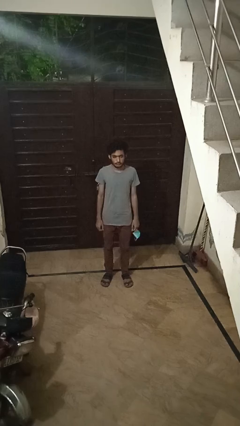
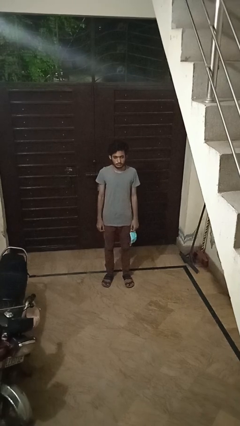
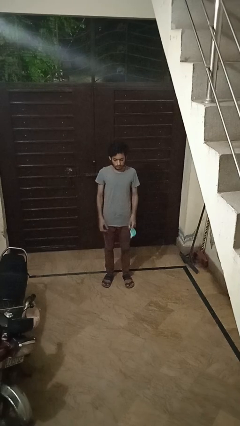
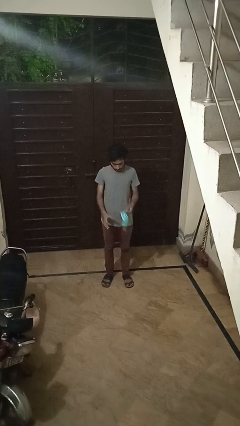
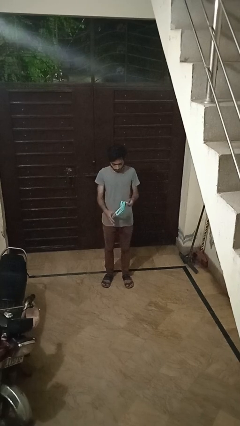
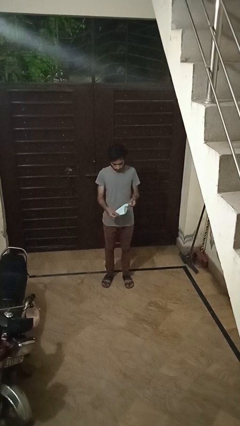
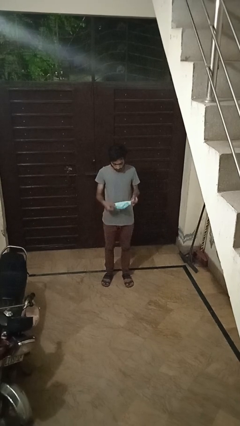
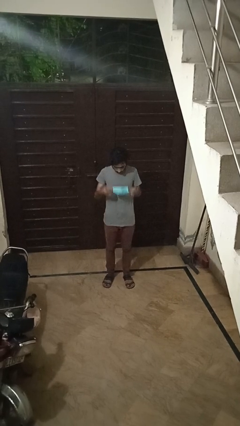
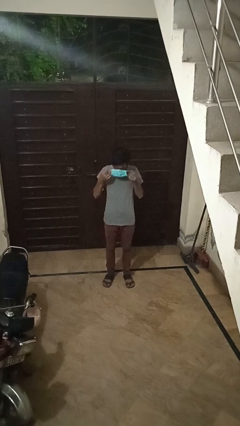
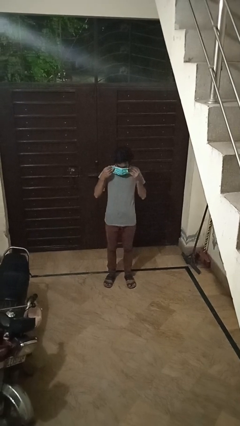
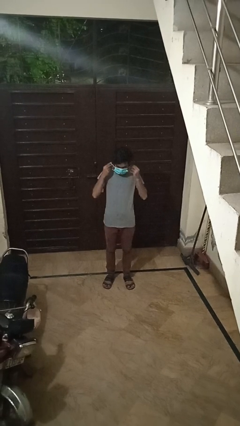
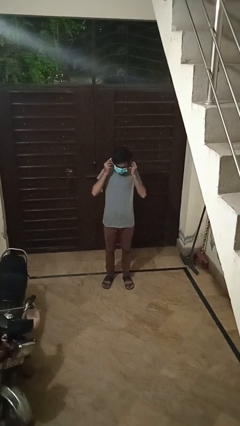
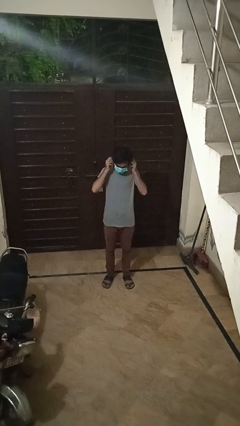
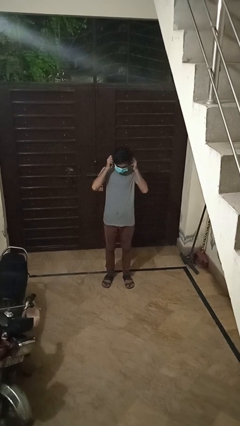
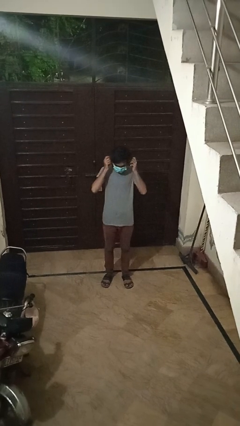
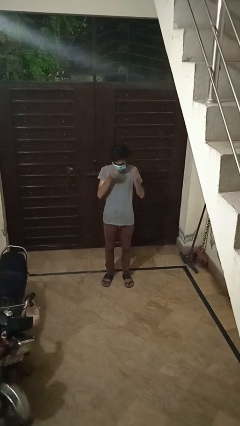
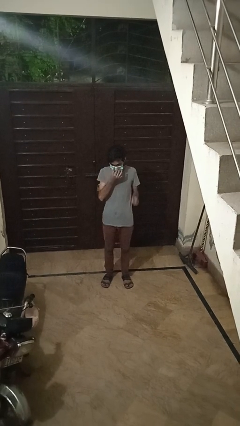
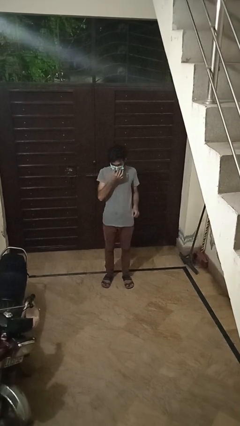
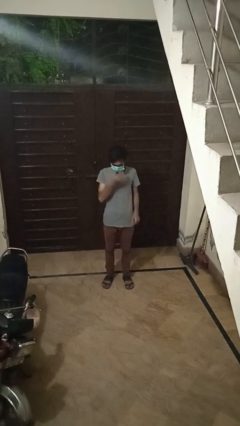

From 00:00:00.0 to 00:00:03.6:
person puts on facemask

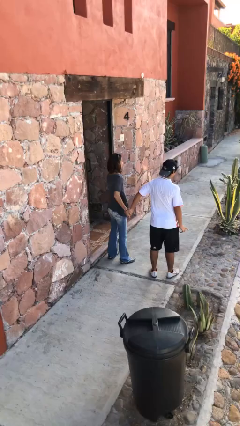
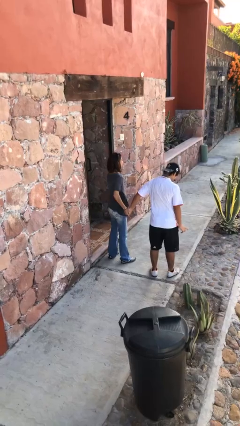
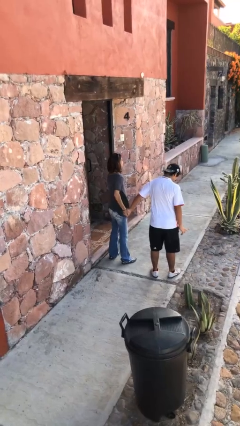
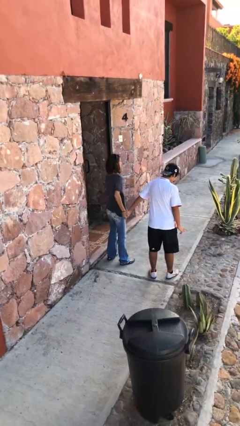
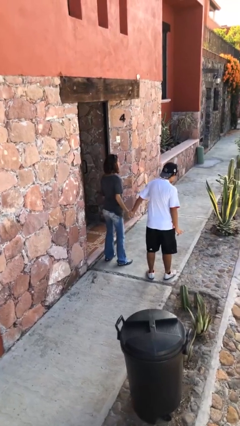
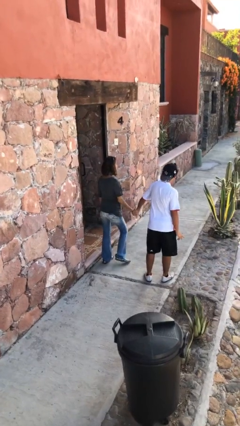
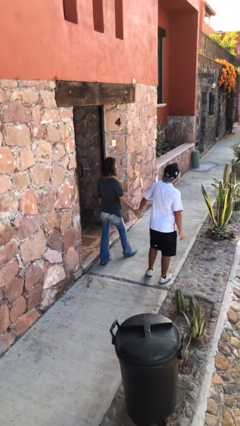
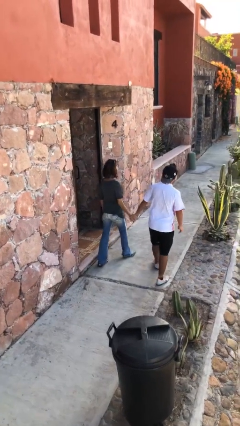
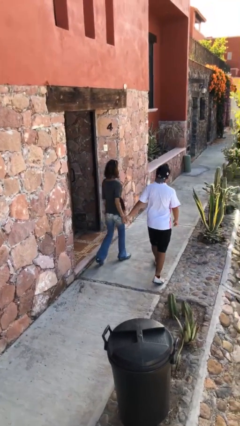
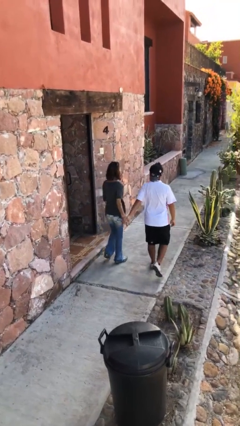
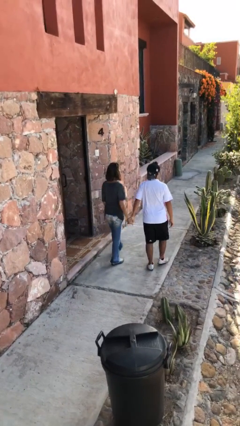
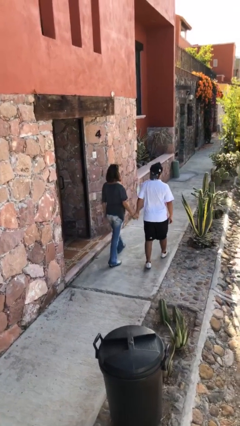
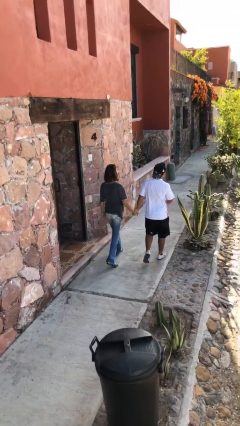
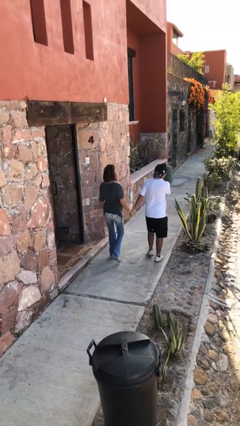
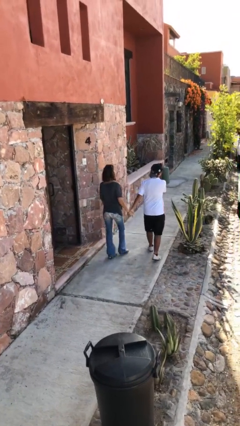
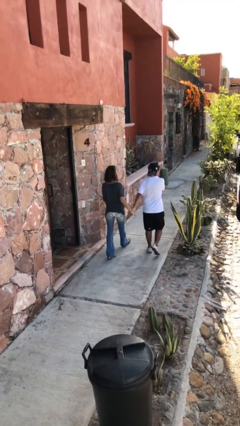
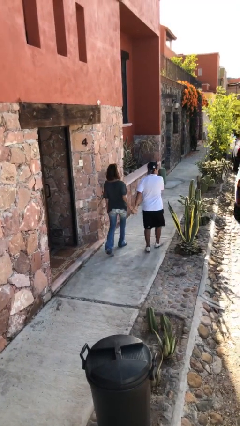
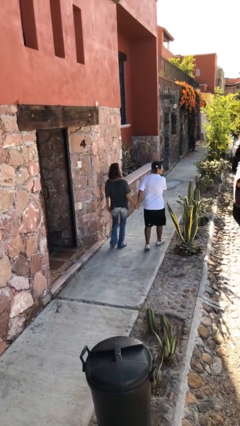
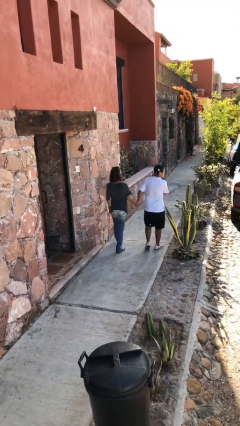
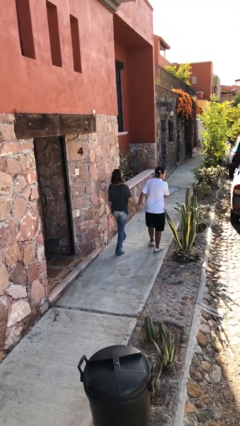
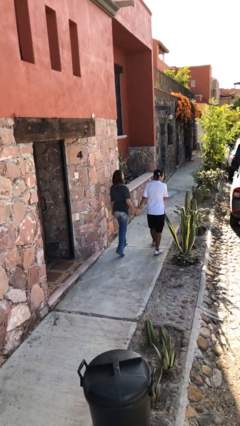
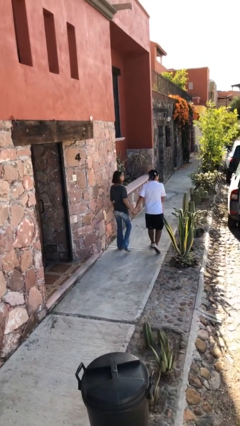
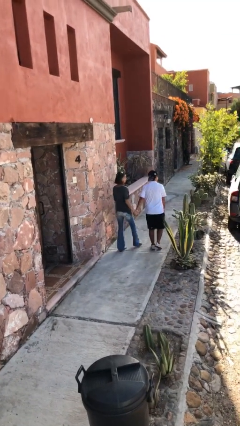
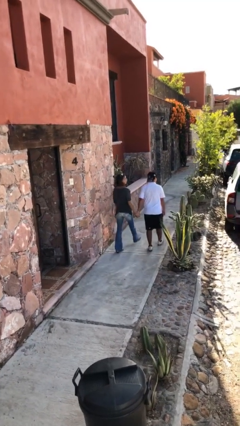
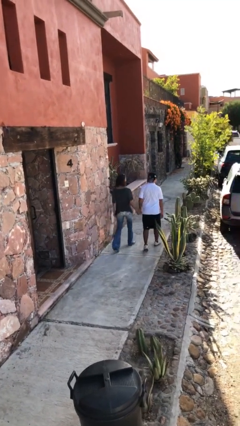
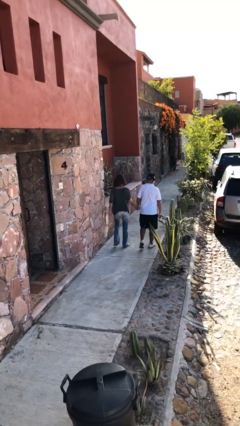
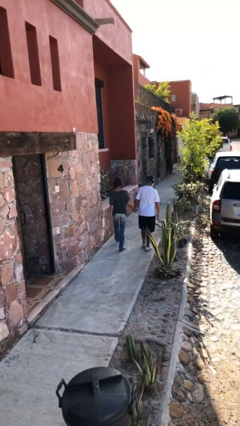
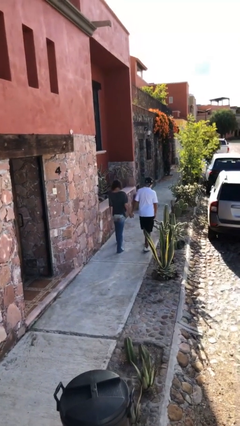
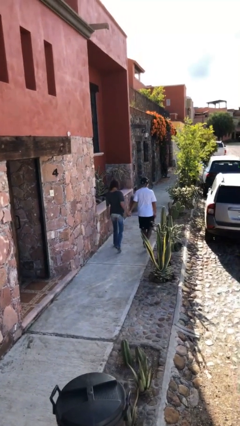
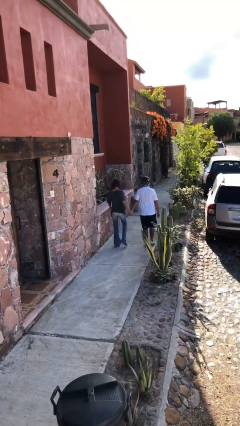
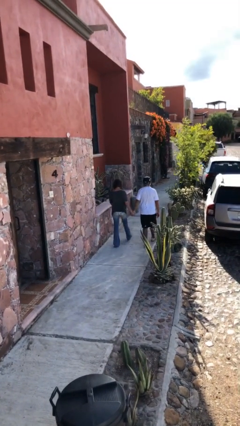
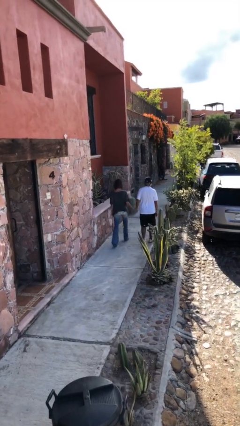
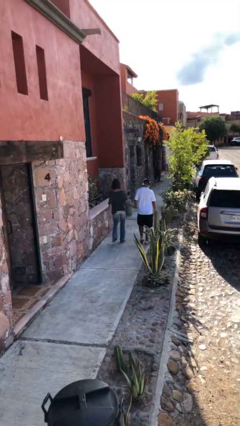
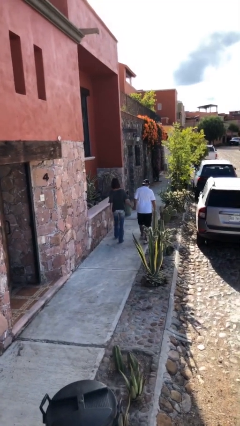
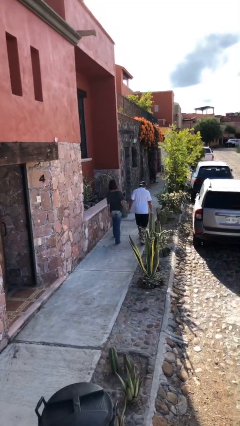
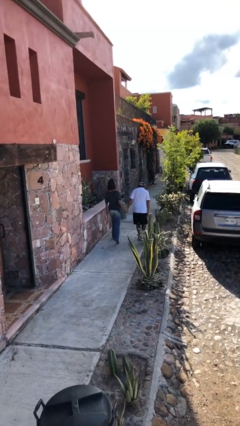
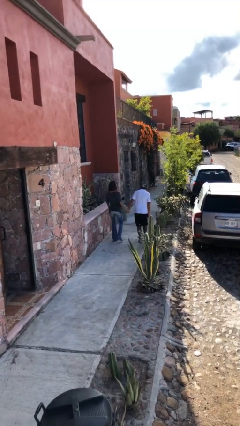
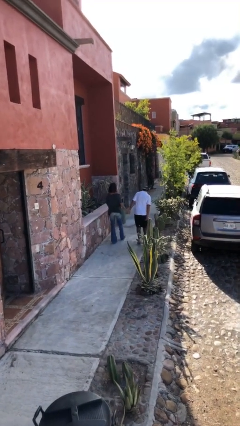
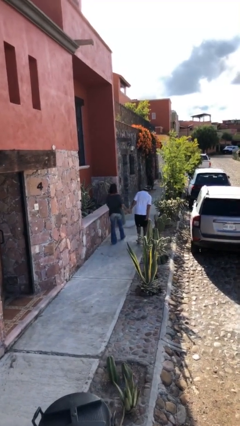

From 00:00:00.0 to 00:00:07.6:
person holds hand

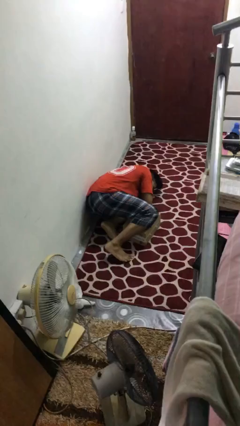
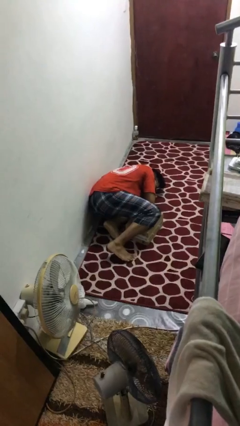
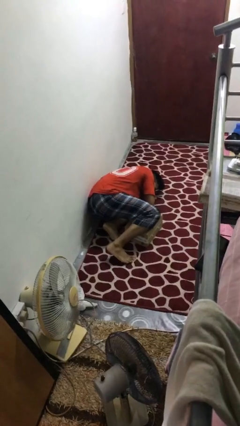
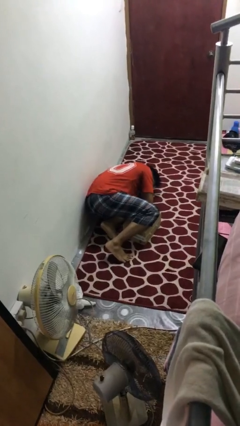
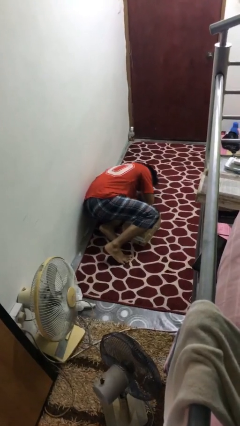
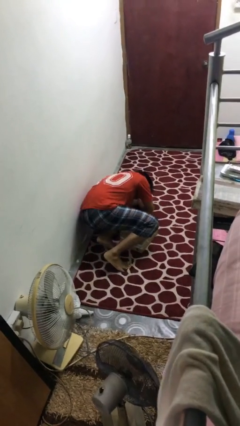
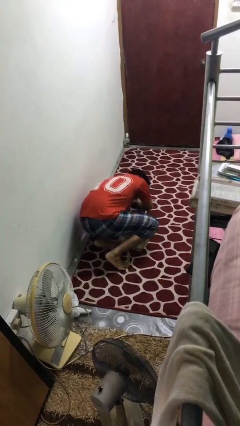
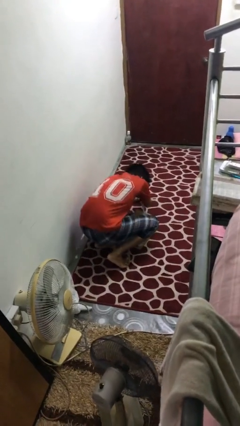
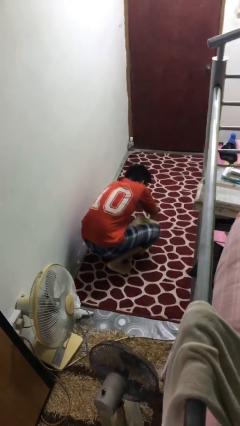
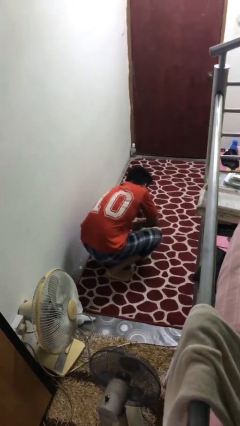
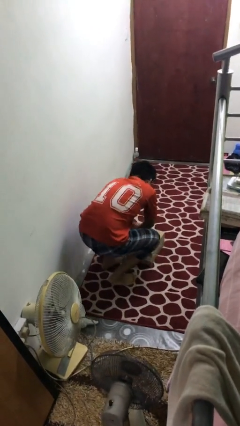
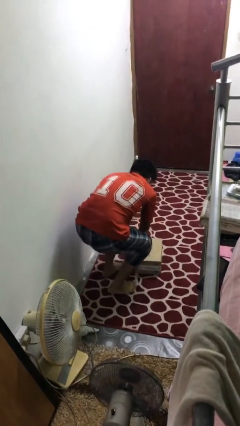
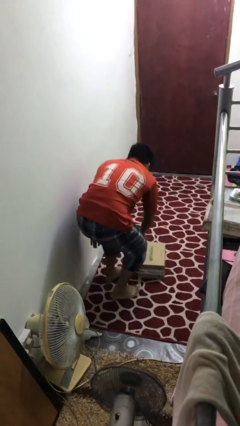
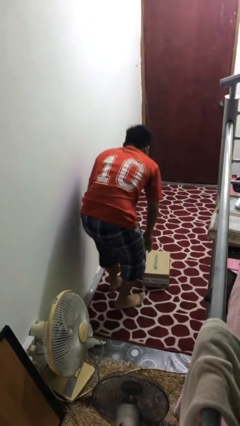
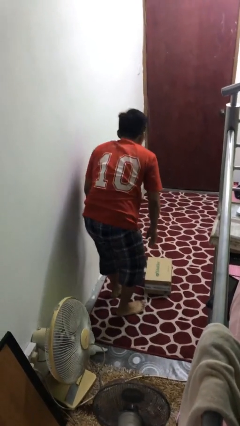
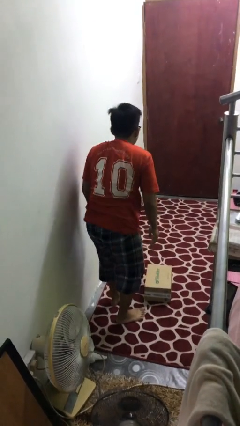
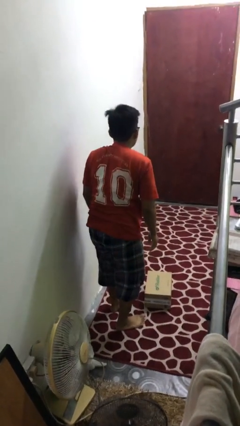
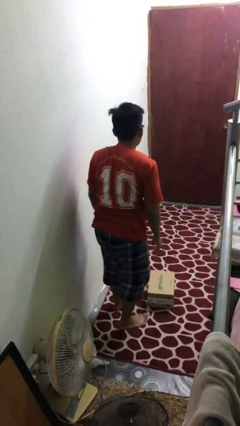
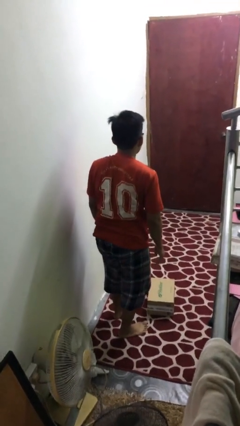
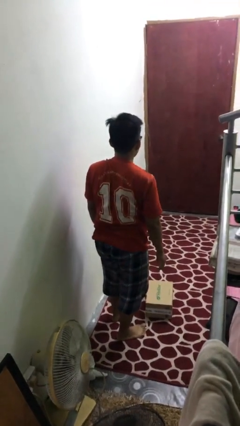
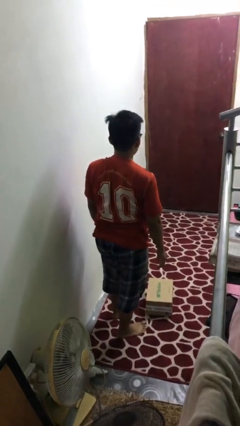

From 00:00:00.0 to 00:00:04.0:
person stands up from floor

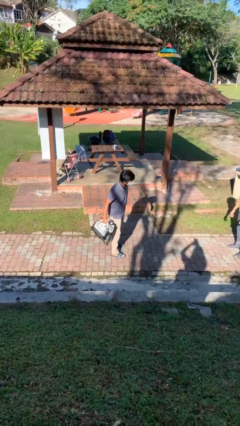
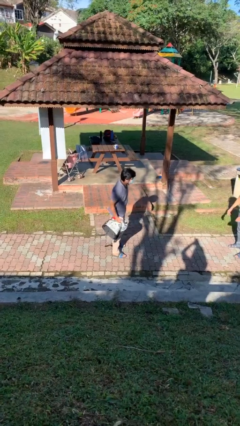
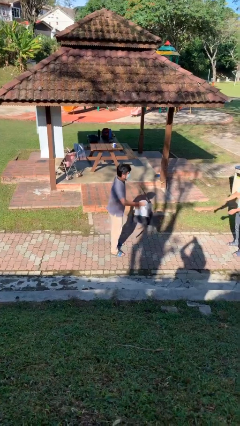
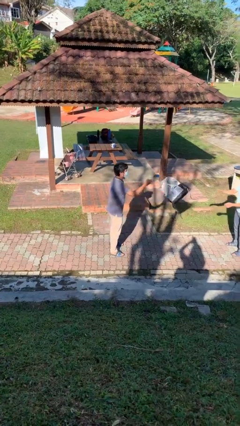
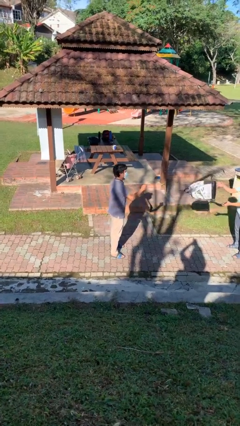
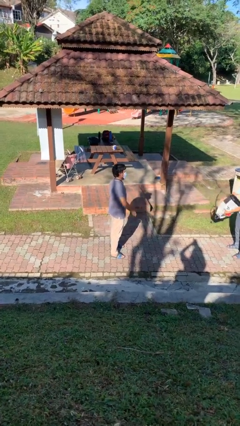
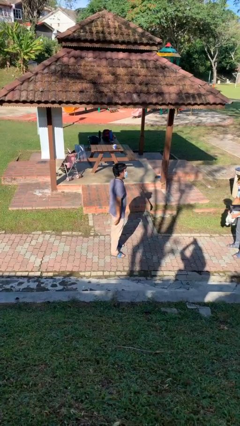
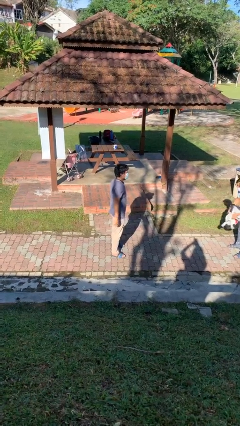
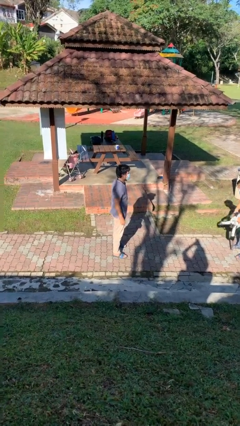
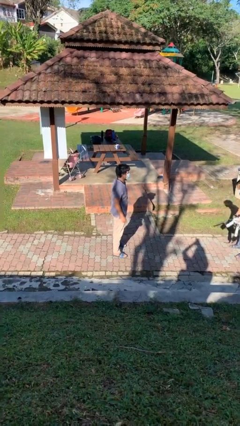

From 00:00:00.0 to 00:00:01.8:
person throws object to person

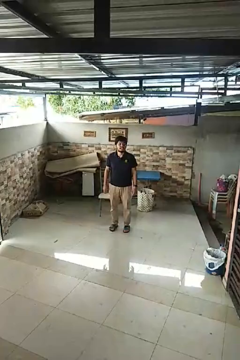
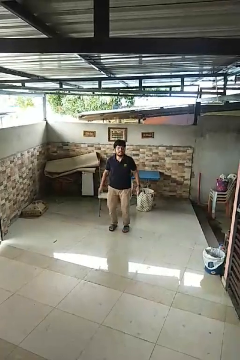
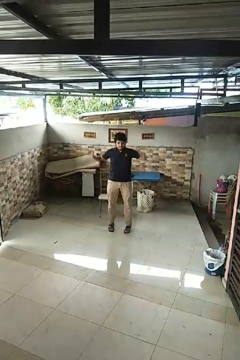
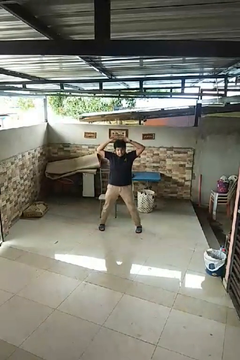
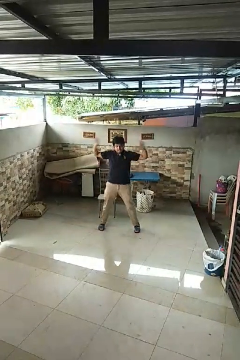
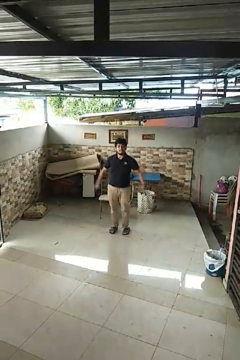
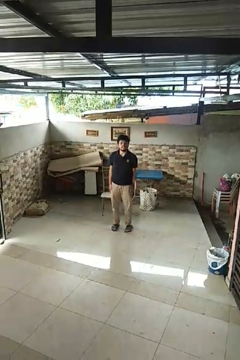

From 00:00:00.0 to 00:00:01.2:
person exercises with jumping jacks
